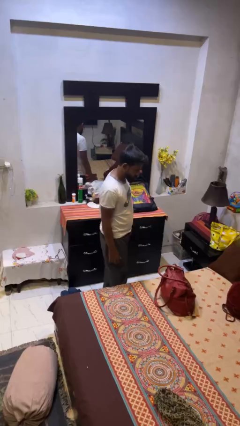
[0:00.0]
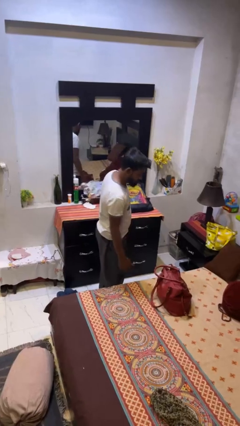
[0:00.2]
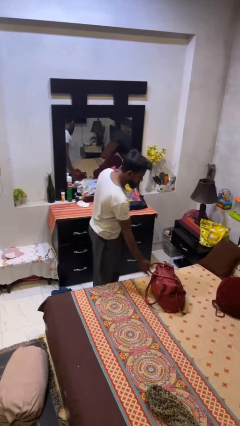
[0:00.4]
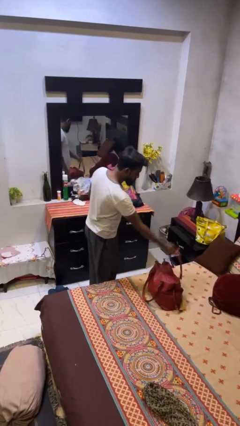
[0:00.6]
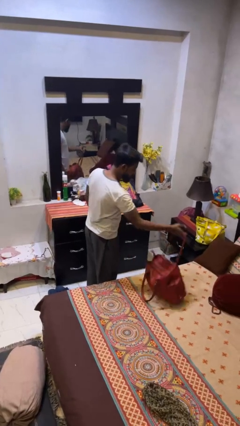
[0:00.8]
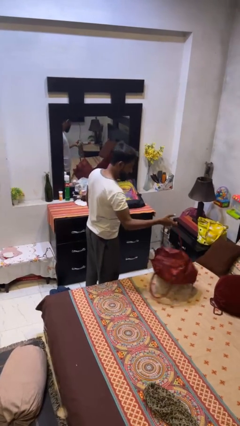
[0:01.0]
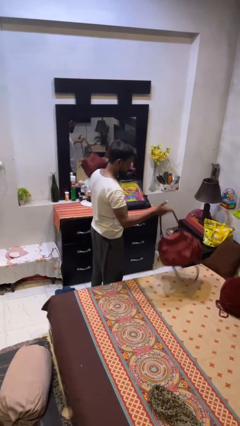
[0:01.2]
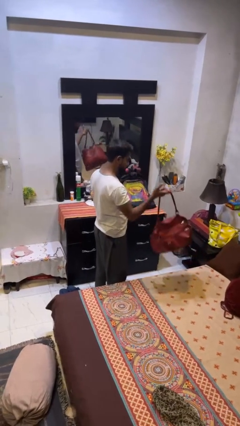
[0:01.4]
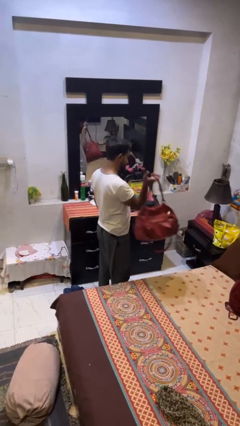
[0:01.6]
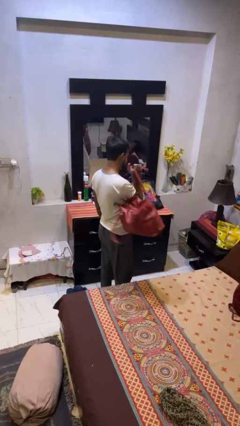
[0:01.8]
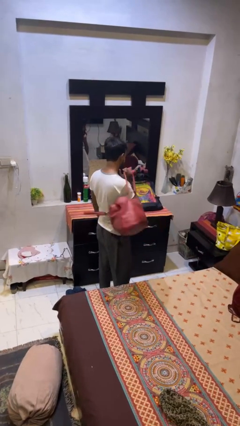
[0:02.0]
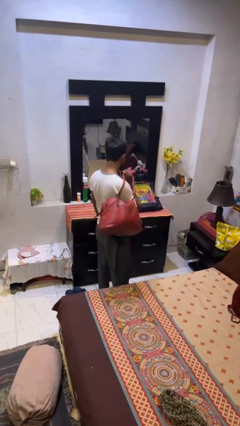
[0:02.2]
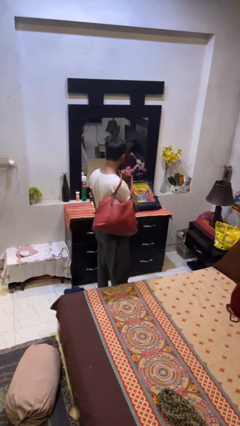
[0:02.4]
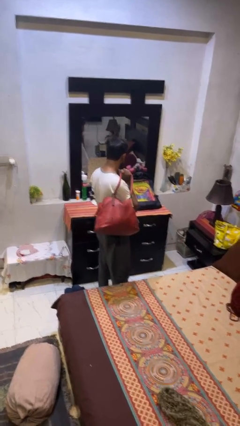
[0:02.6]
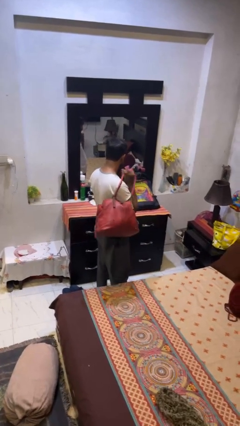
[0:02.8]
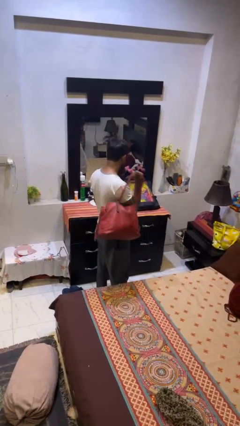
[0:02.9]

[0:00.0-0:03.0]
person picks up object from bed

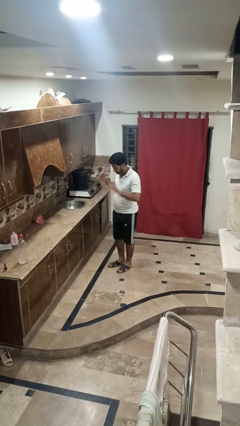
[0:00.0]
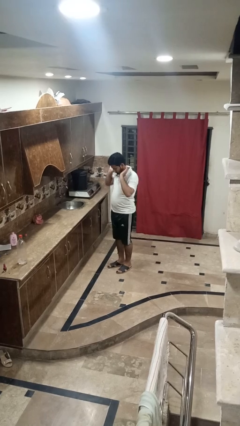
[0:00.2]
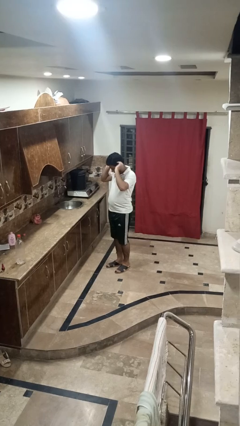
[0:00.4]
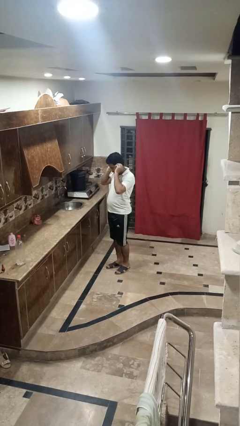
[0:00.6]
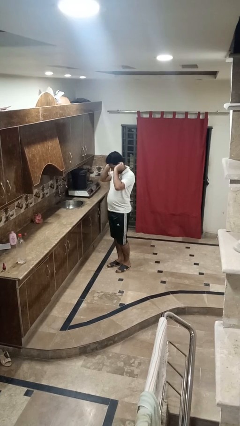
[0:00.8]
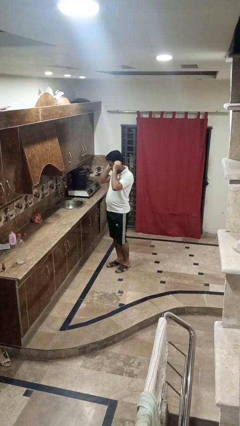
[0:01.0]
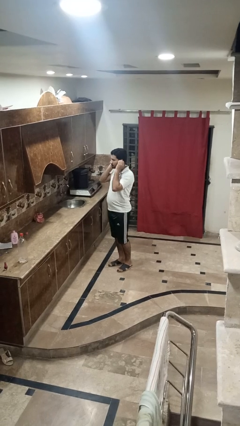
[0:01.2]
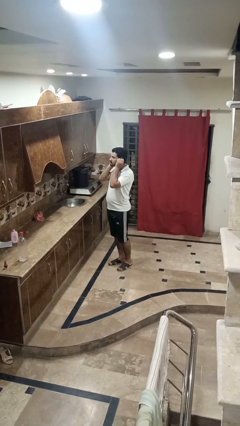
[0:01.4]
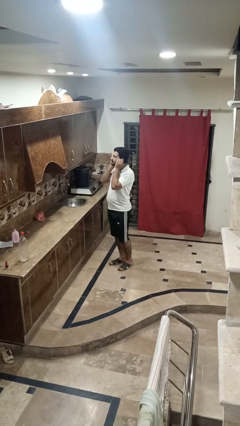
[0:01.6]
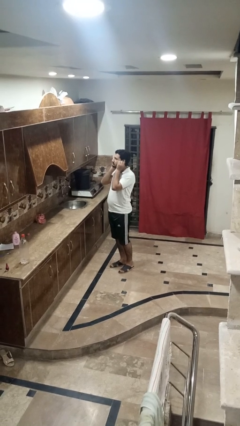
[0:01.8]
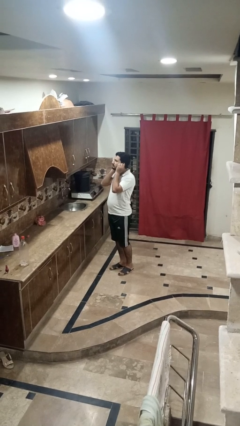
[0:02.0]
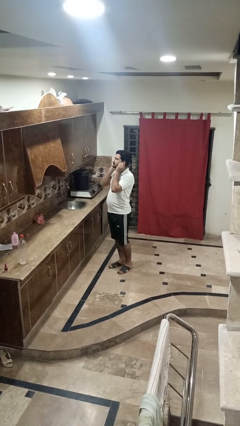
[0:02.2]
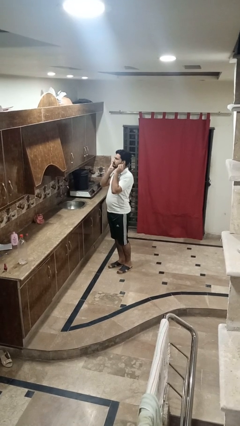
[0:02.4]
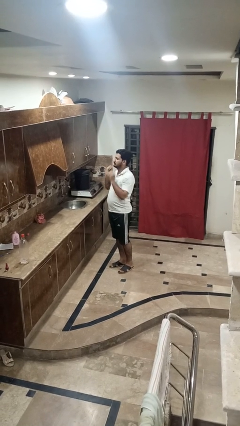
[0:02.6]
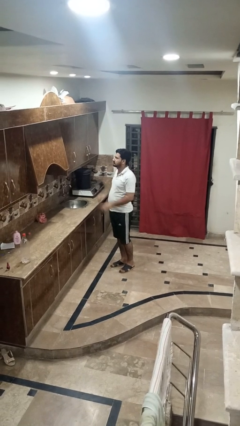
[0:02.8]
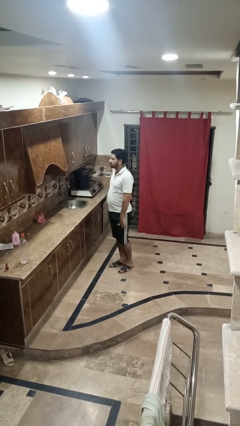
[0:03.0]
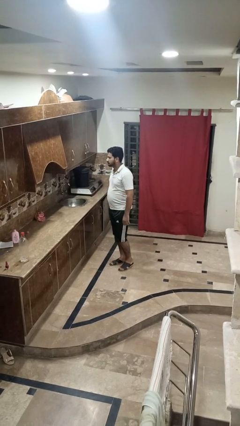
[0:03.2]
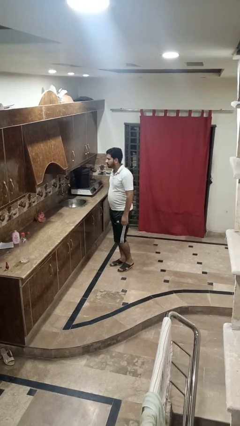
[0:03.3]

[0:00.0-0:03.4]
person touches earlobe

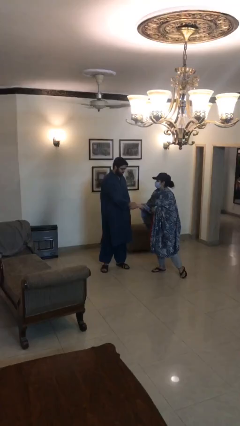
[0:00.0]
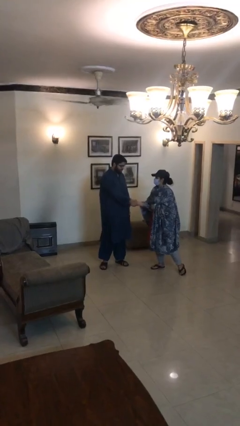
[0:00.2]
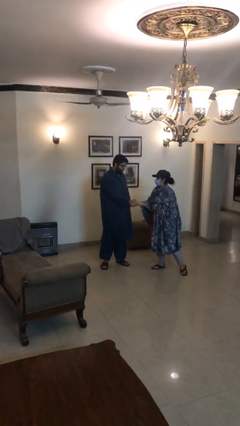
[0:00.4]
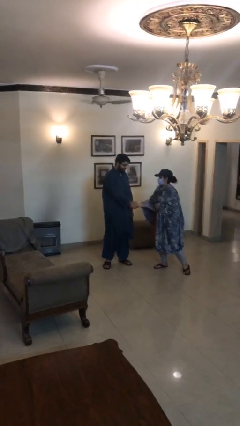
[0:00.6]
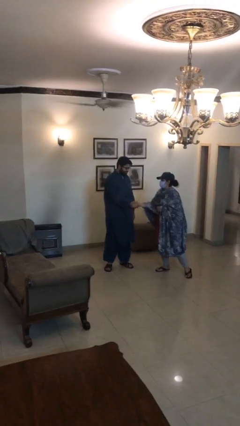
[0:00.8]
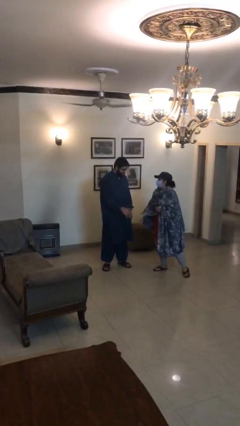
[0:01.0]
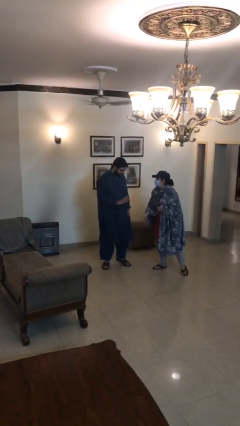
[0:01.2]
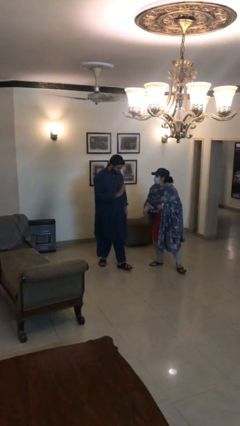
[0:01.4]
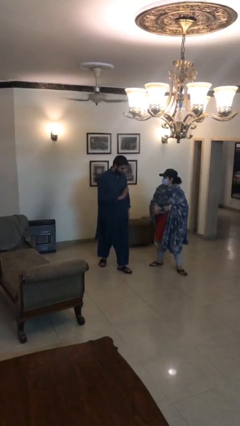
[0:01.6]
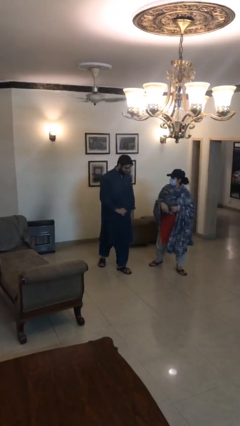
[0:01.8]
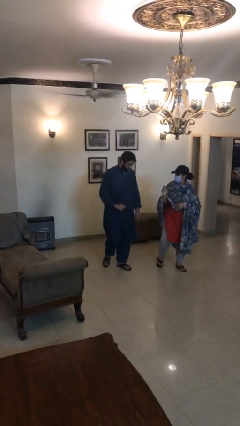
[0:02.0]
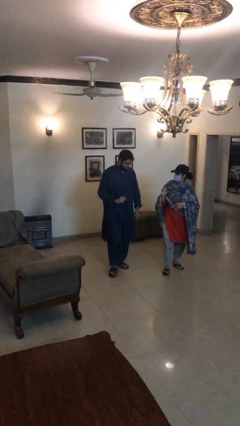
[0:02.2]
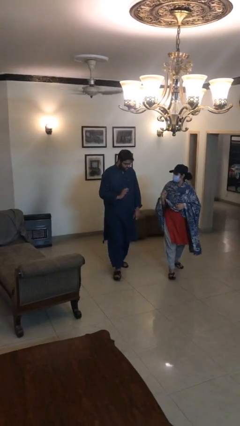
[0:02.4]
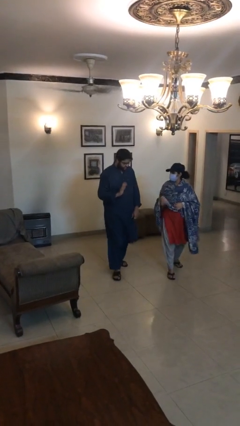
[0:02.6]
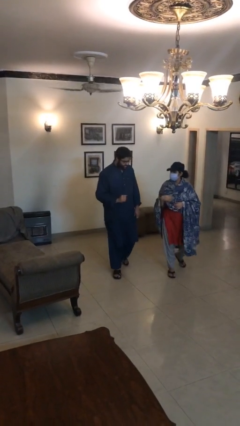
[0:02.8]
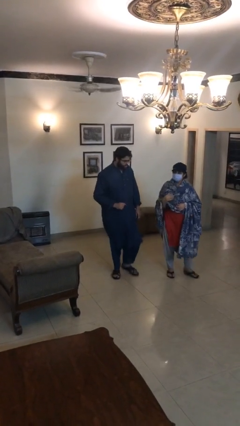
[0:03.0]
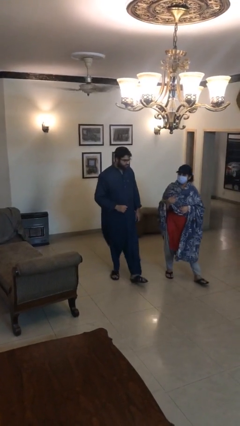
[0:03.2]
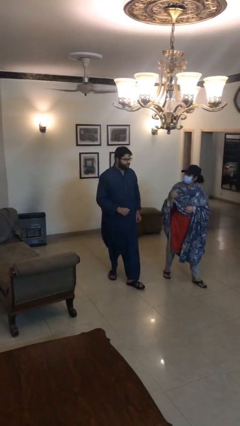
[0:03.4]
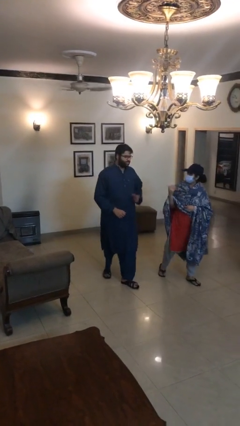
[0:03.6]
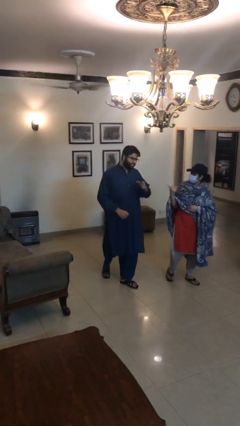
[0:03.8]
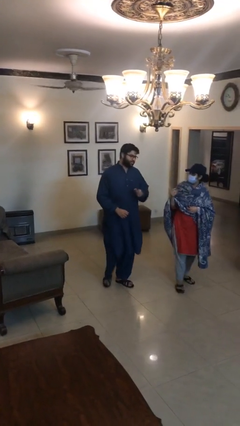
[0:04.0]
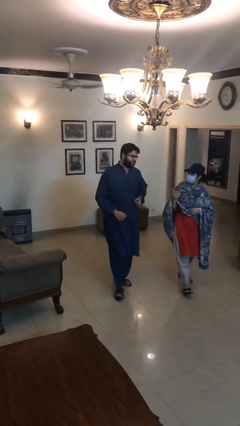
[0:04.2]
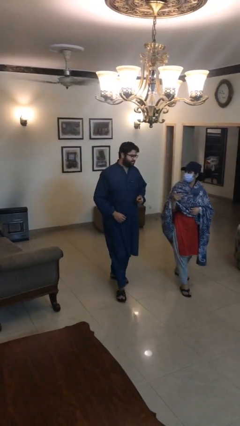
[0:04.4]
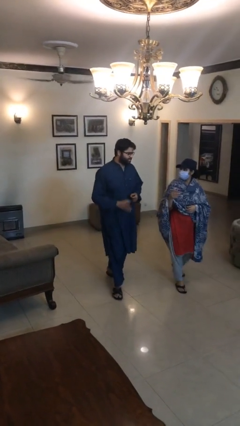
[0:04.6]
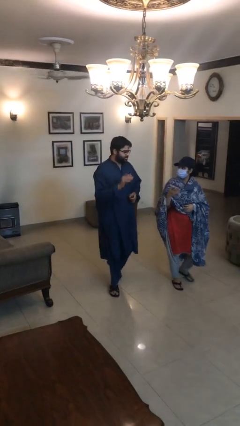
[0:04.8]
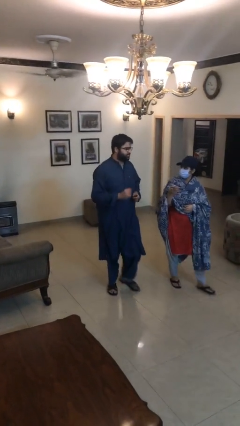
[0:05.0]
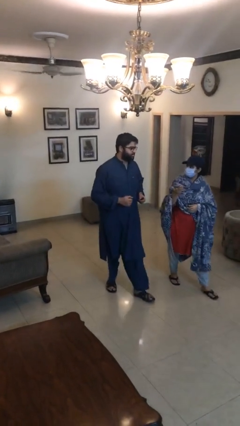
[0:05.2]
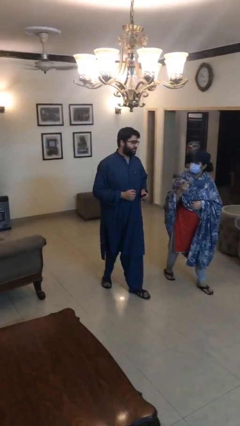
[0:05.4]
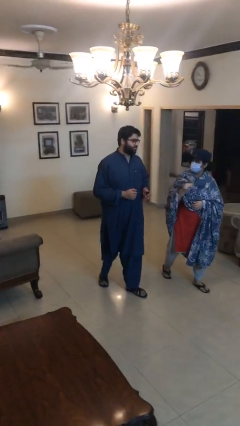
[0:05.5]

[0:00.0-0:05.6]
person talks to person

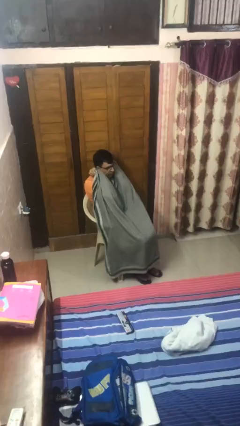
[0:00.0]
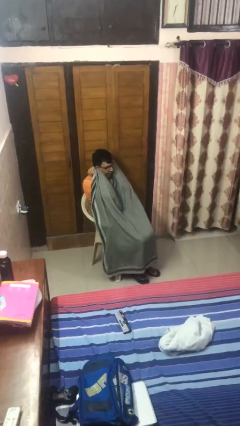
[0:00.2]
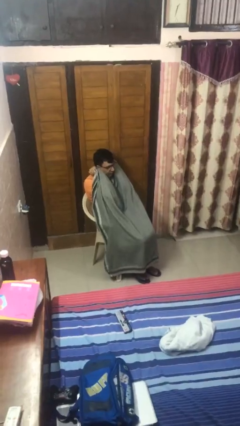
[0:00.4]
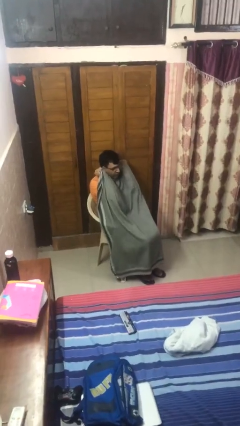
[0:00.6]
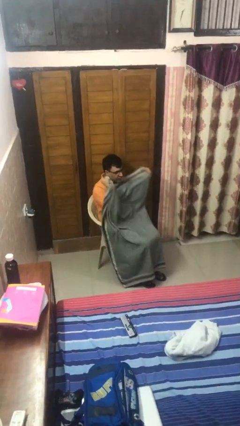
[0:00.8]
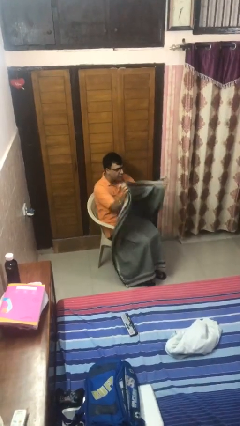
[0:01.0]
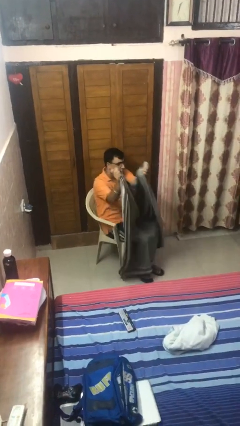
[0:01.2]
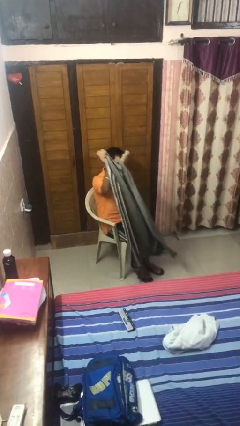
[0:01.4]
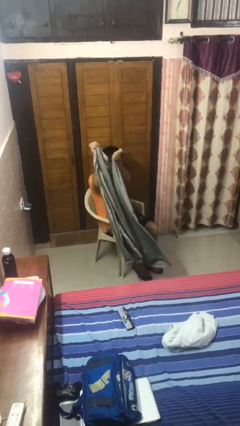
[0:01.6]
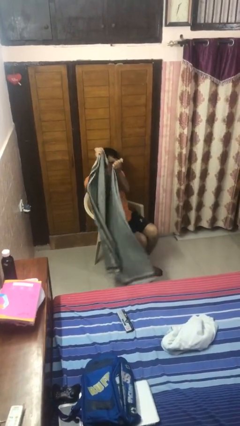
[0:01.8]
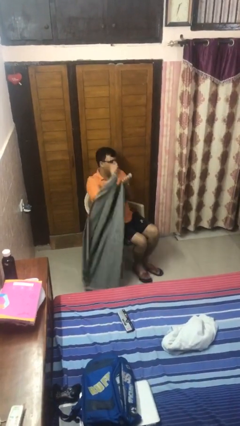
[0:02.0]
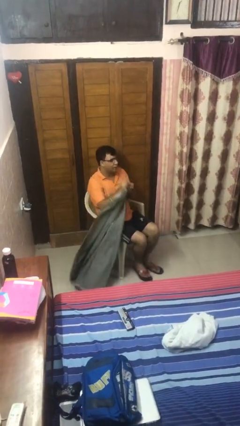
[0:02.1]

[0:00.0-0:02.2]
person uncovers with blanket

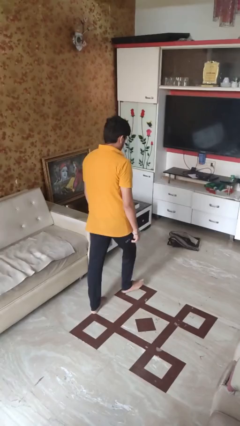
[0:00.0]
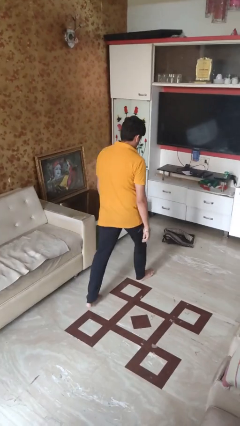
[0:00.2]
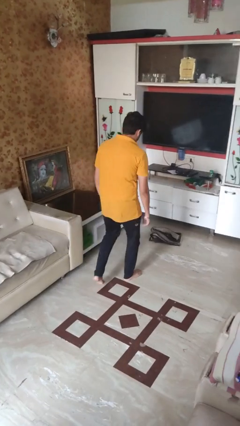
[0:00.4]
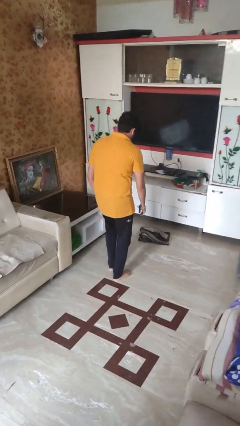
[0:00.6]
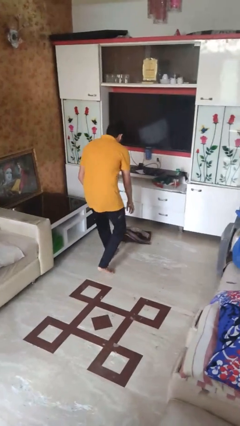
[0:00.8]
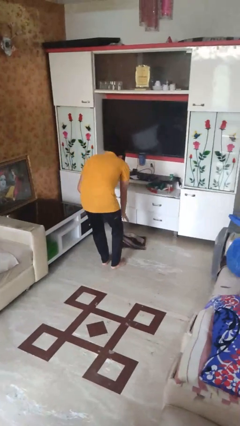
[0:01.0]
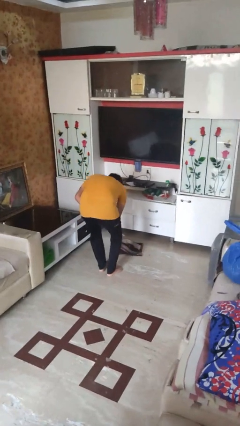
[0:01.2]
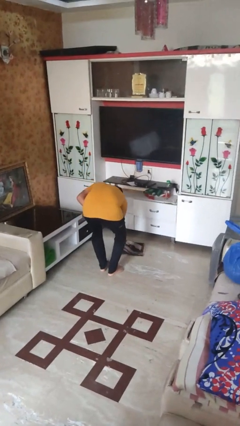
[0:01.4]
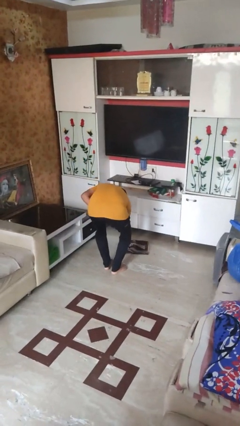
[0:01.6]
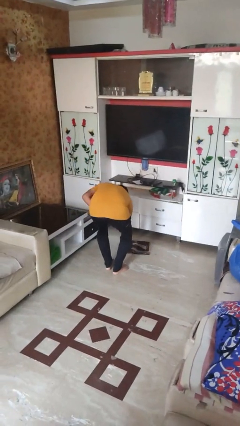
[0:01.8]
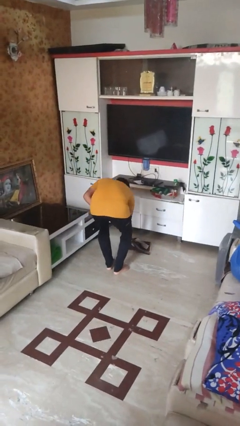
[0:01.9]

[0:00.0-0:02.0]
person picks up object from floor

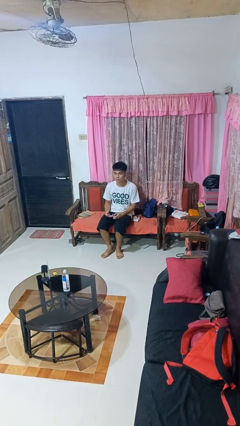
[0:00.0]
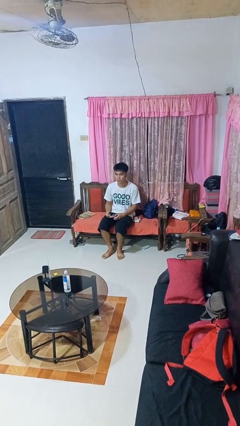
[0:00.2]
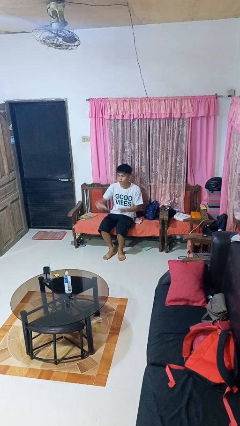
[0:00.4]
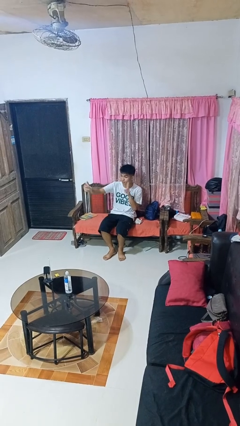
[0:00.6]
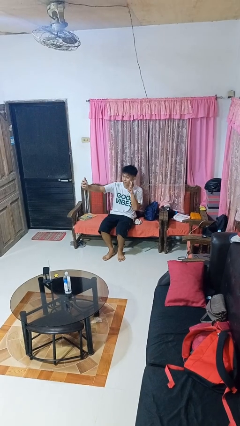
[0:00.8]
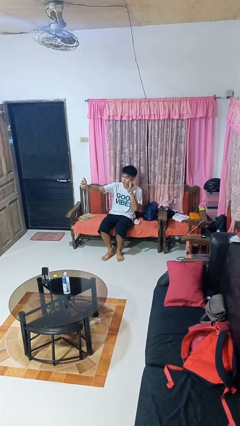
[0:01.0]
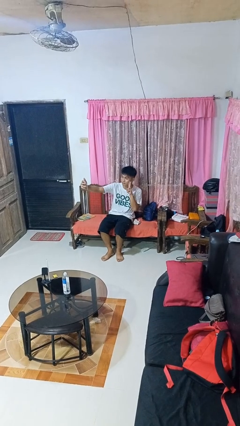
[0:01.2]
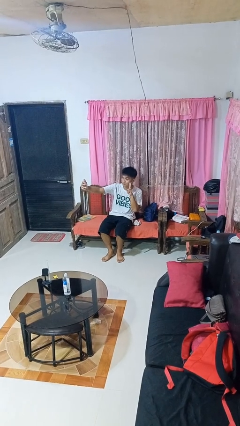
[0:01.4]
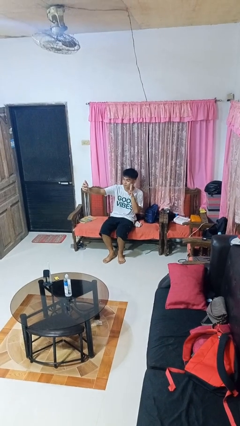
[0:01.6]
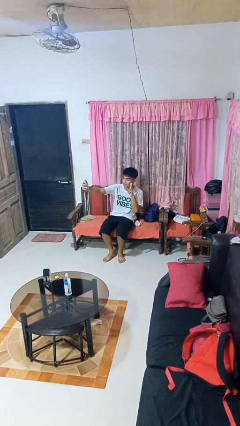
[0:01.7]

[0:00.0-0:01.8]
person takes selfie
